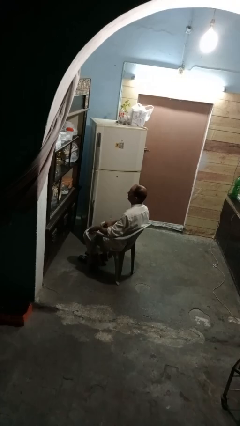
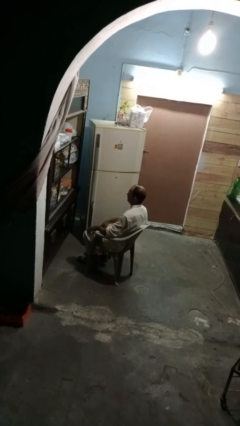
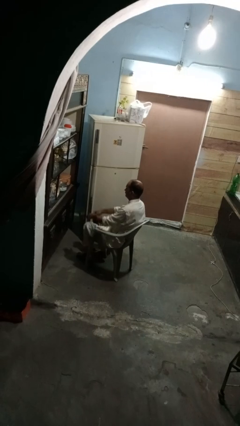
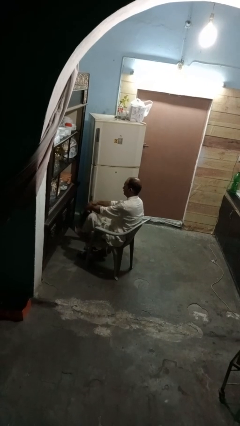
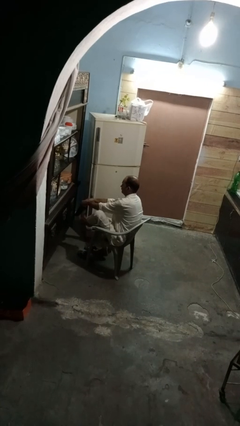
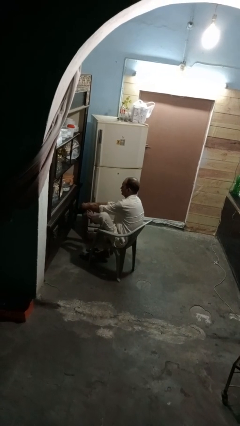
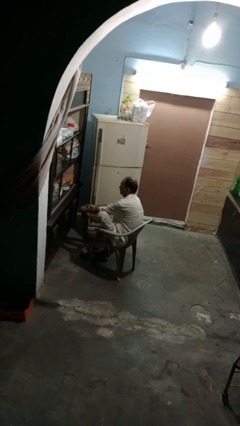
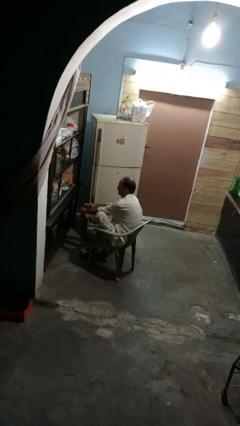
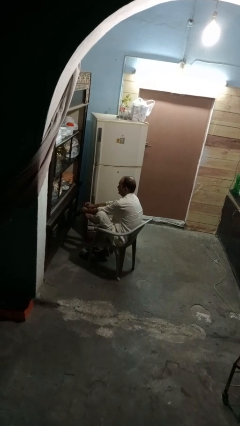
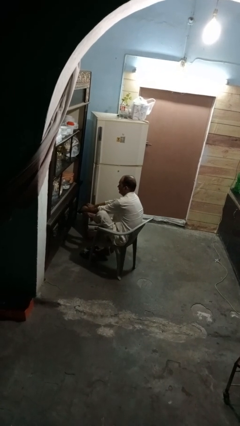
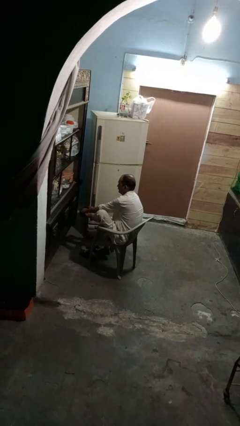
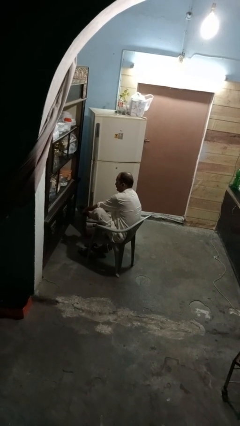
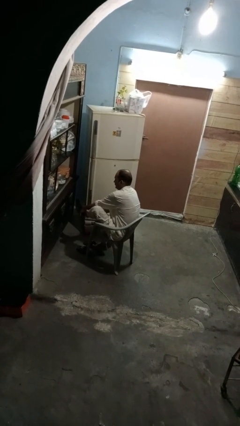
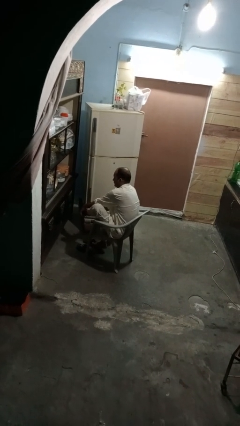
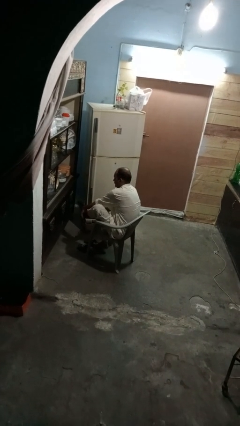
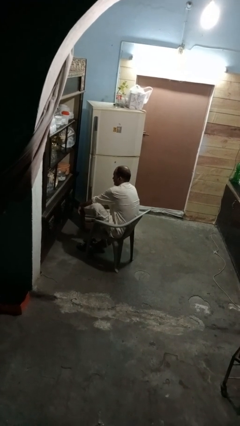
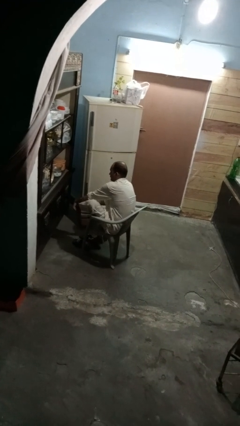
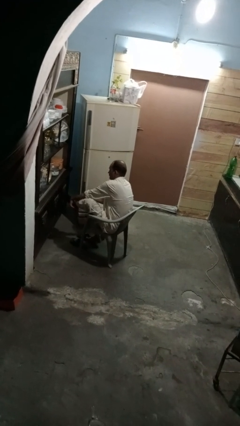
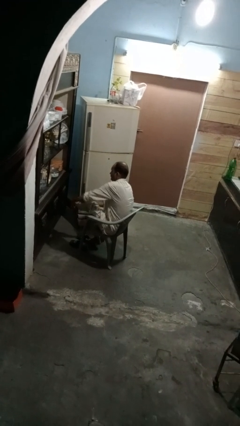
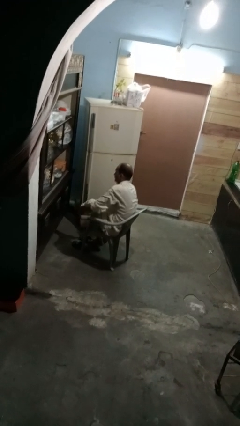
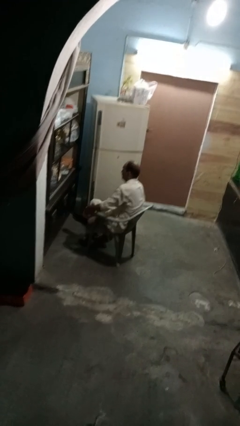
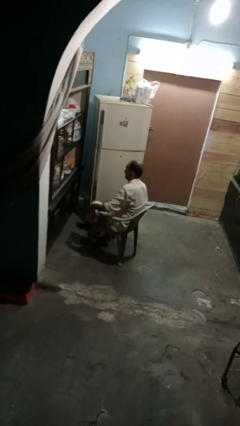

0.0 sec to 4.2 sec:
person puts on socks

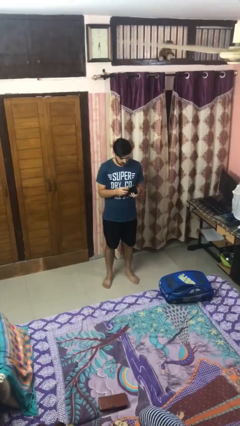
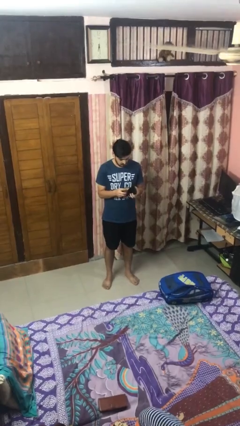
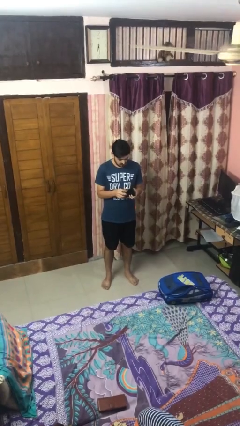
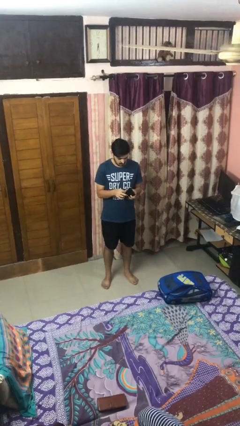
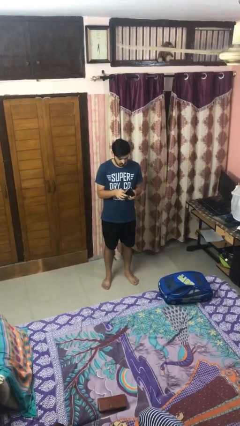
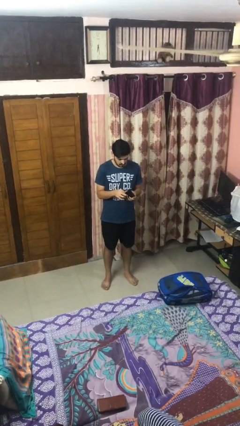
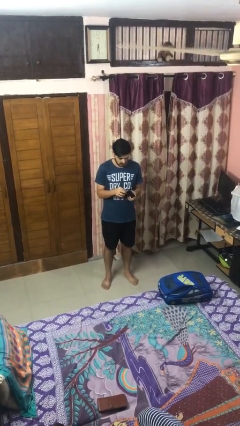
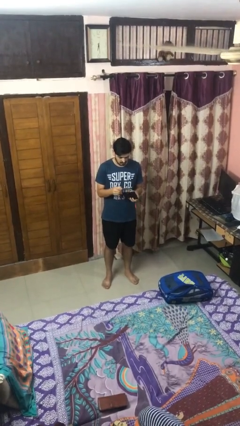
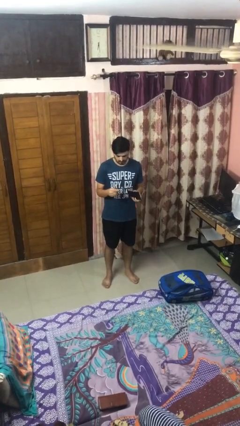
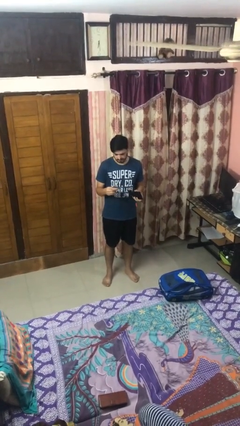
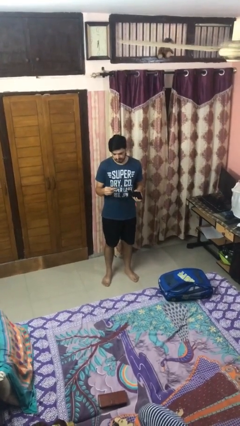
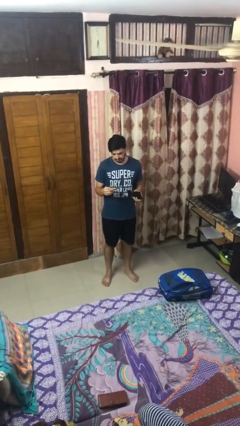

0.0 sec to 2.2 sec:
person takes object from purse

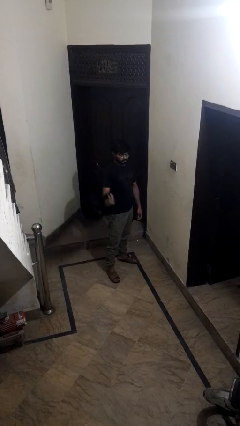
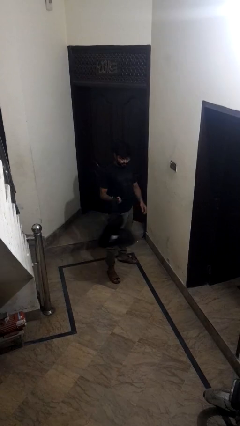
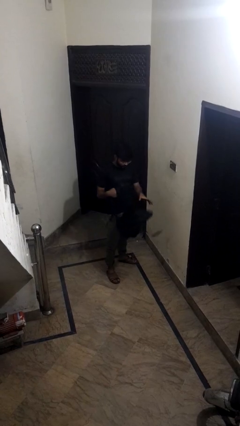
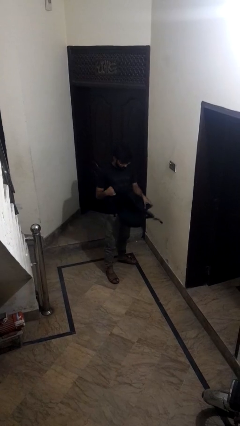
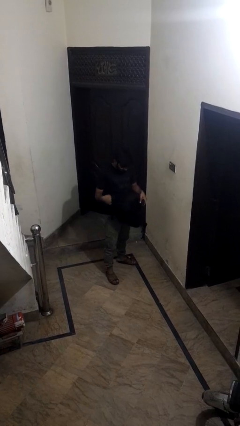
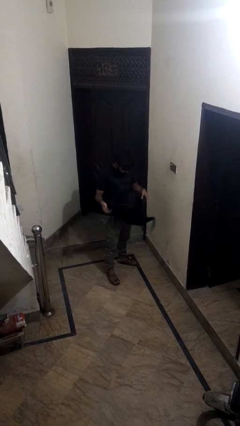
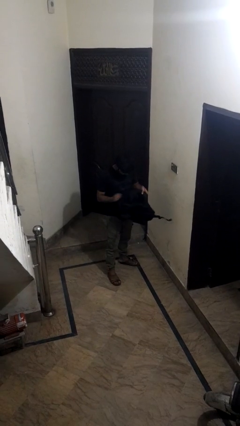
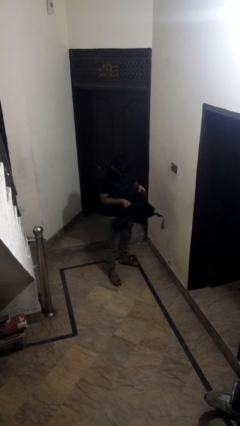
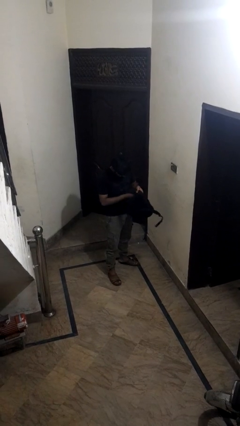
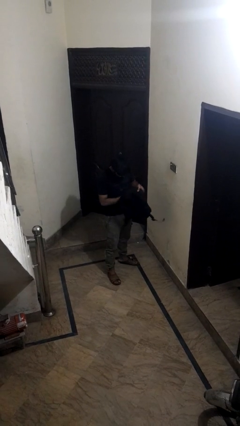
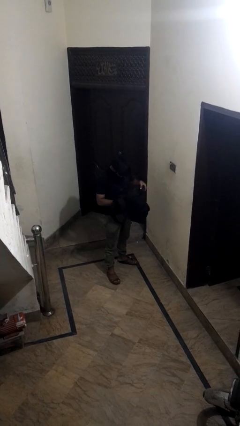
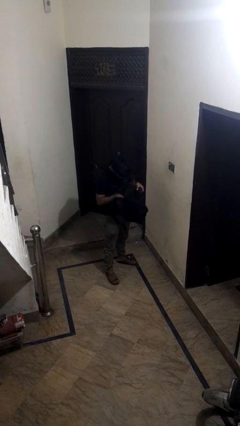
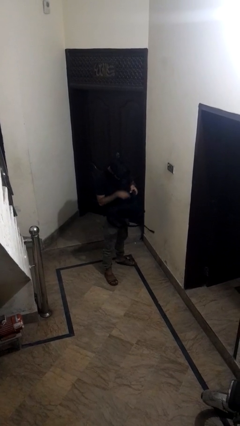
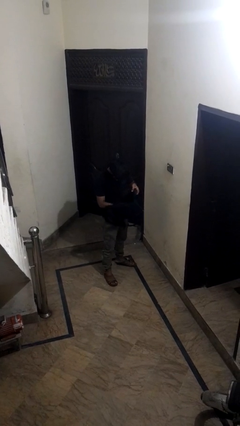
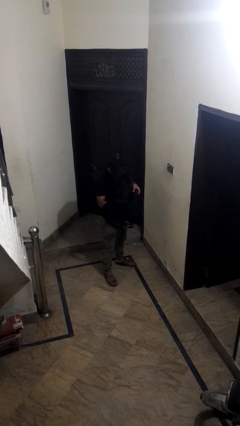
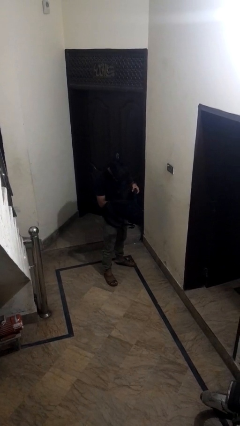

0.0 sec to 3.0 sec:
person searches in backpack

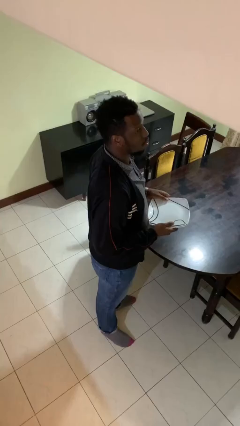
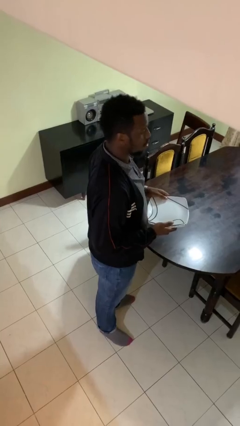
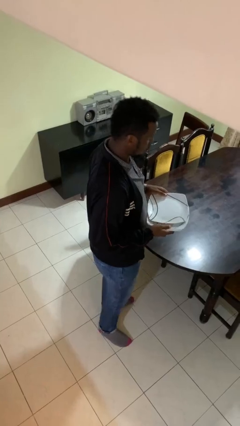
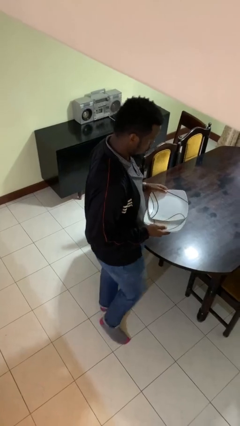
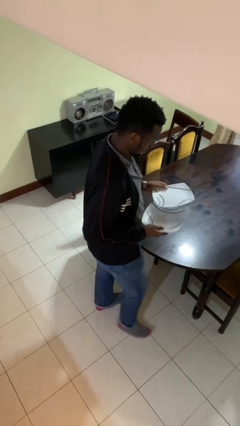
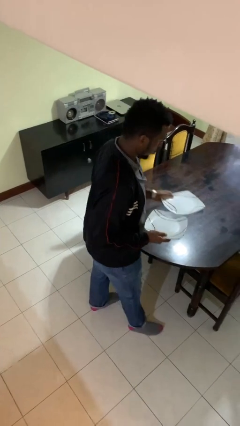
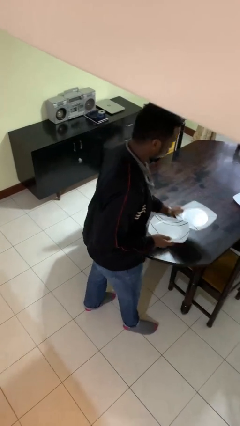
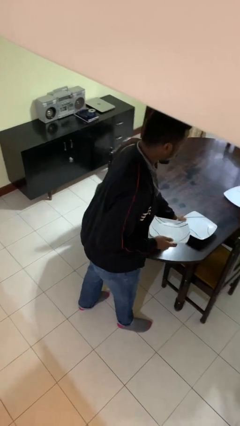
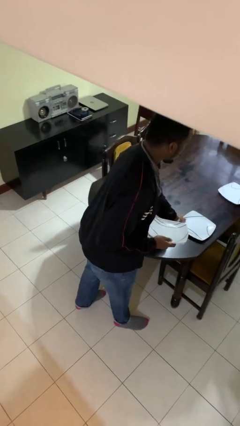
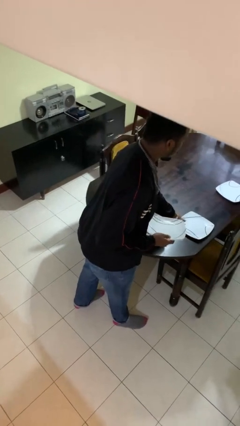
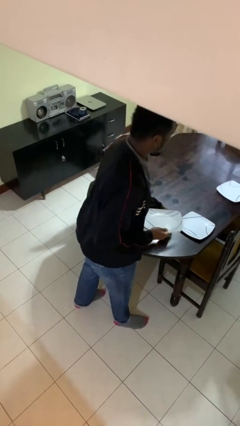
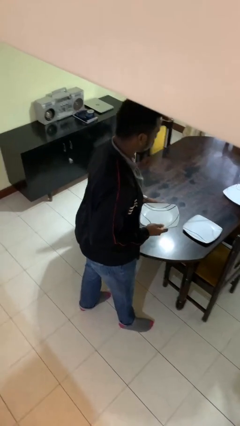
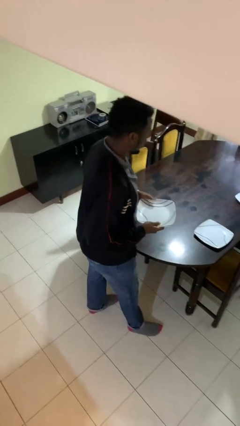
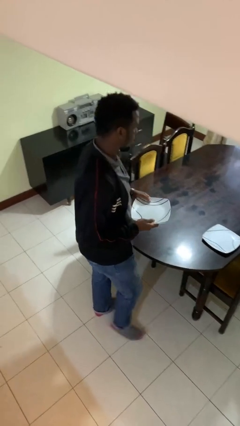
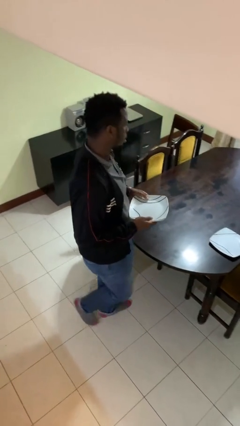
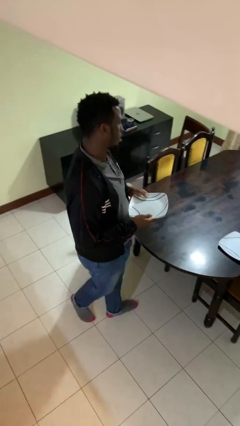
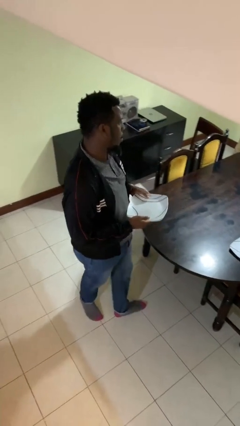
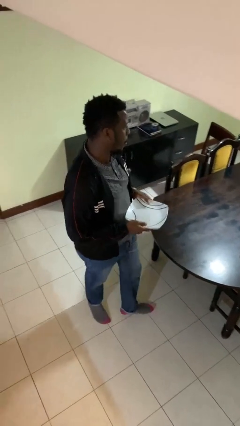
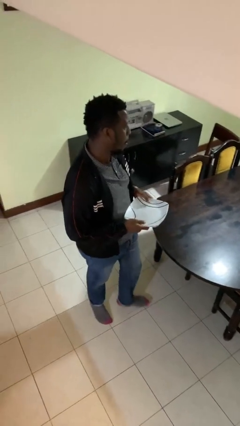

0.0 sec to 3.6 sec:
person sets table

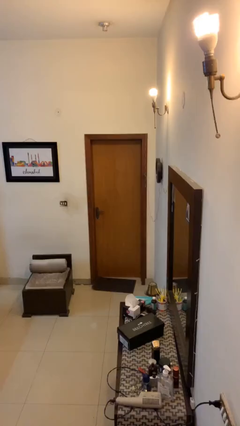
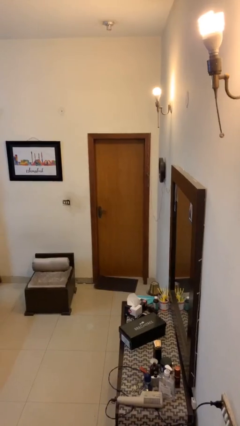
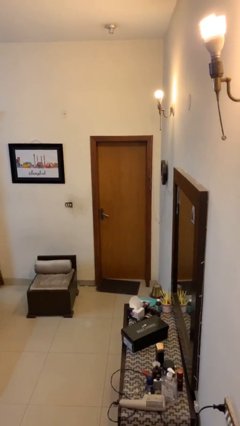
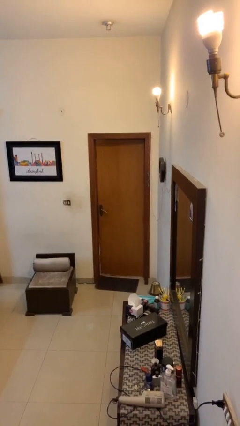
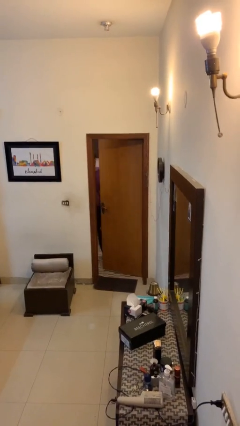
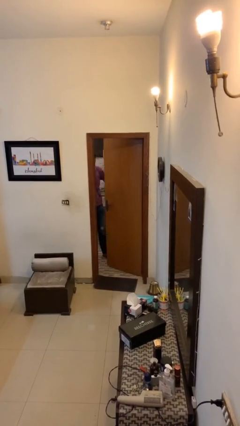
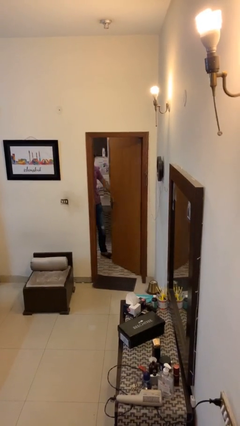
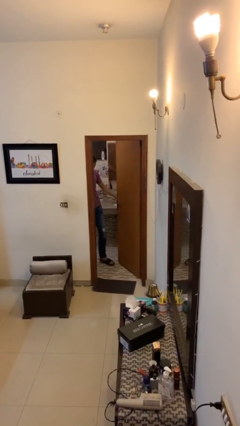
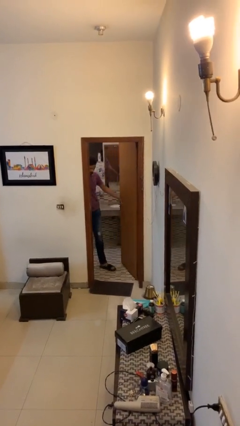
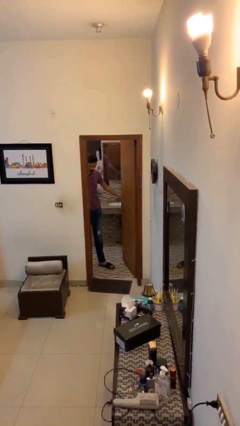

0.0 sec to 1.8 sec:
person opens facility door

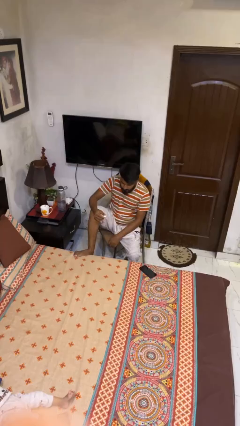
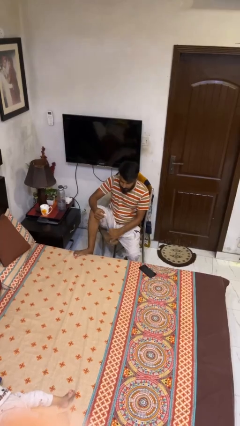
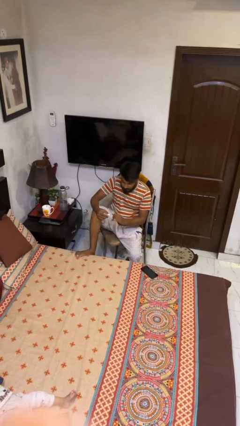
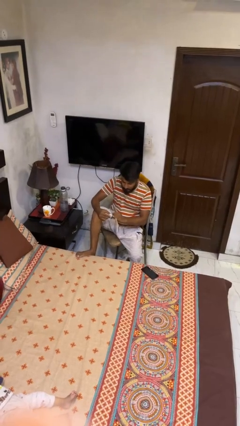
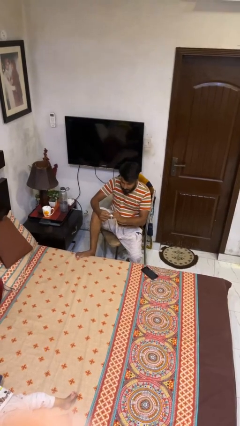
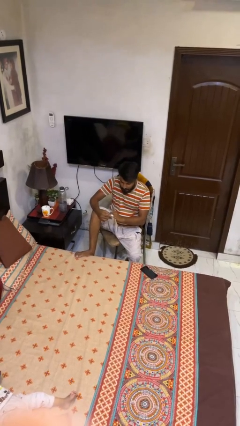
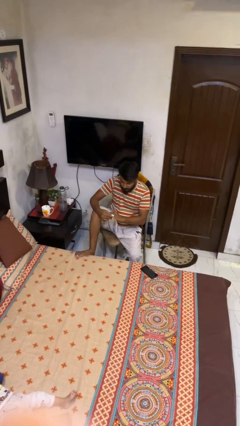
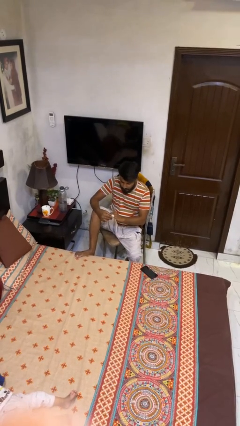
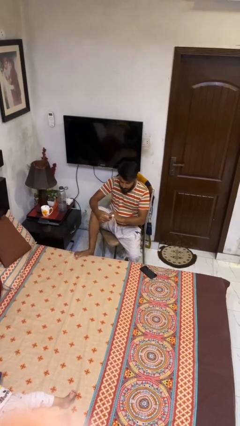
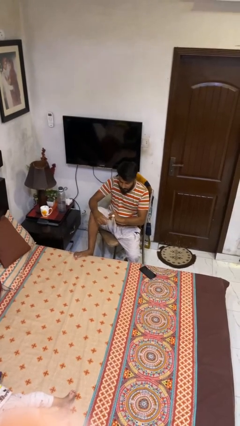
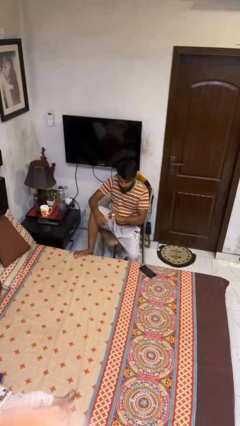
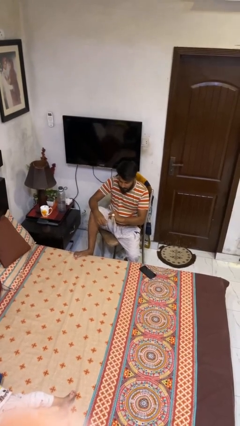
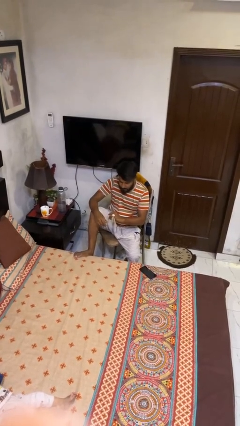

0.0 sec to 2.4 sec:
person puts on ring
